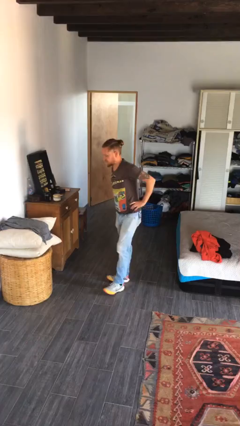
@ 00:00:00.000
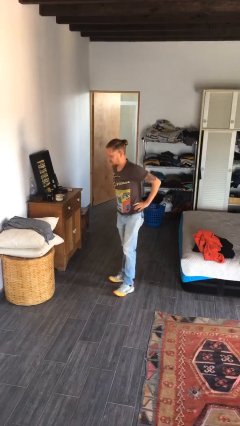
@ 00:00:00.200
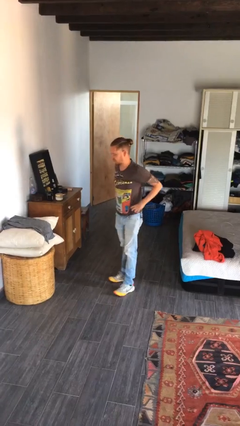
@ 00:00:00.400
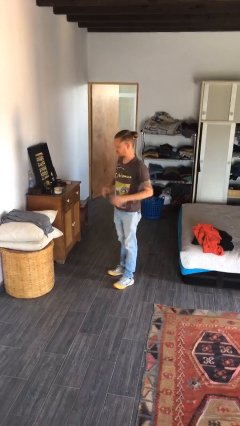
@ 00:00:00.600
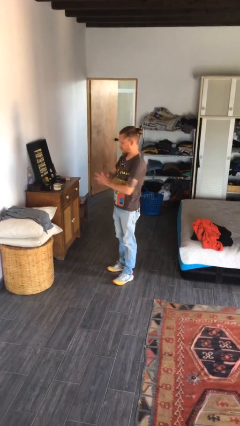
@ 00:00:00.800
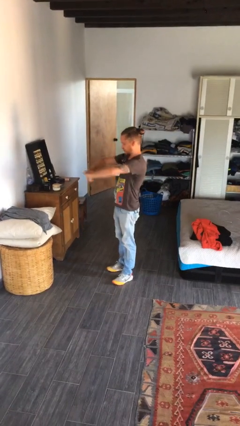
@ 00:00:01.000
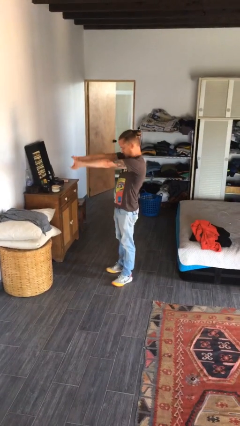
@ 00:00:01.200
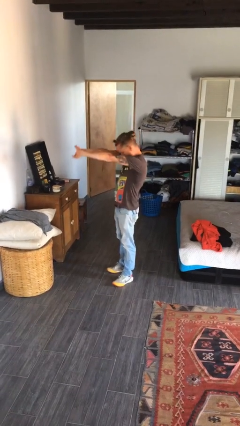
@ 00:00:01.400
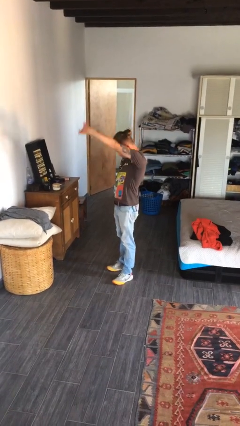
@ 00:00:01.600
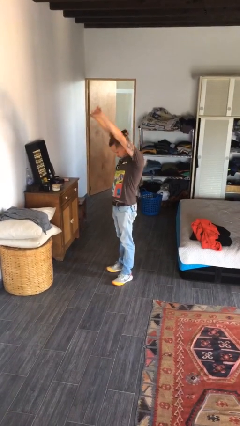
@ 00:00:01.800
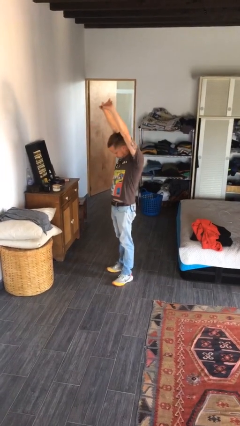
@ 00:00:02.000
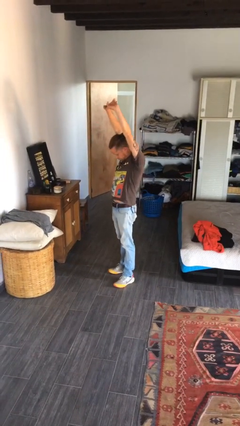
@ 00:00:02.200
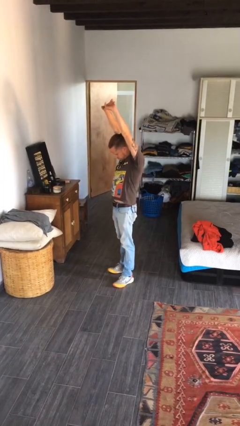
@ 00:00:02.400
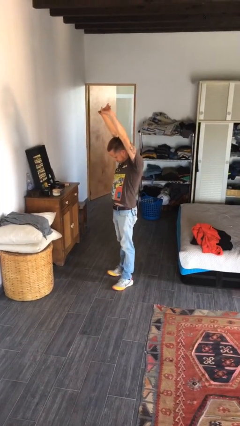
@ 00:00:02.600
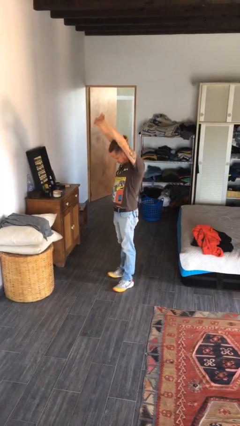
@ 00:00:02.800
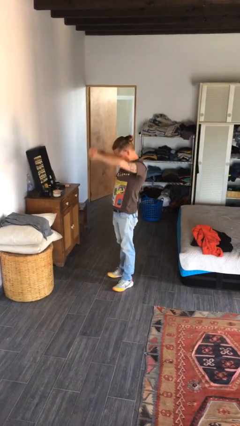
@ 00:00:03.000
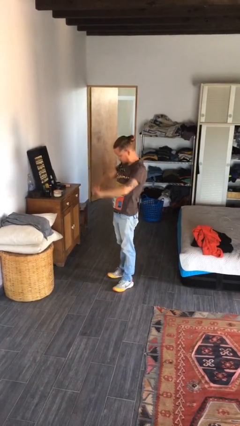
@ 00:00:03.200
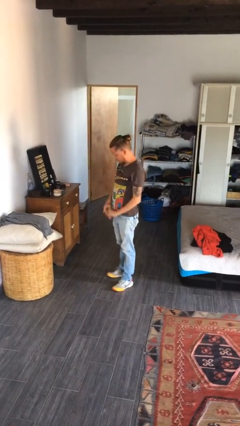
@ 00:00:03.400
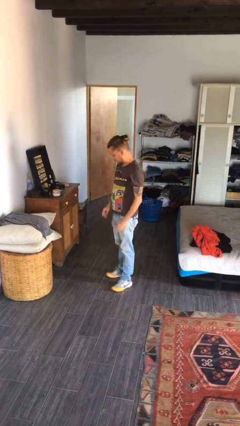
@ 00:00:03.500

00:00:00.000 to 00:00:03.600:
person stretches arms to side

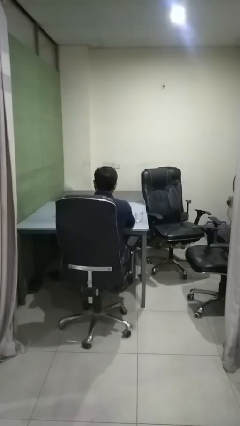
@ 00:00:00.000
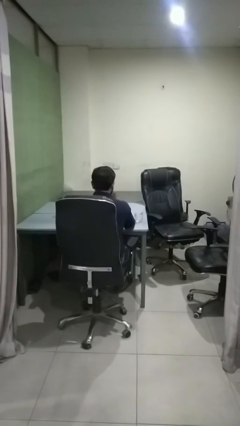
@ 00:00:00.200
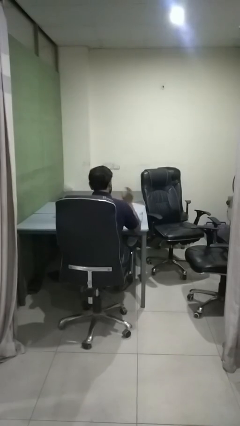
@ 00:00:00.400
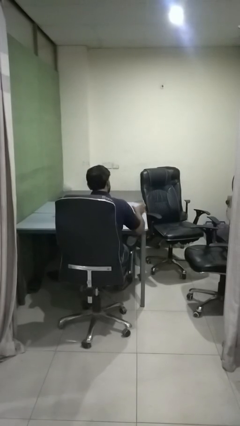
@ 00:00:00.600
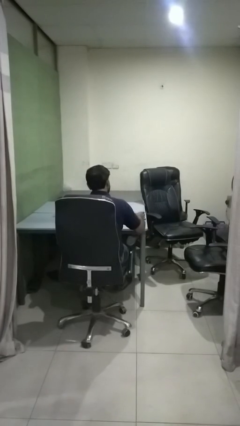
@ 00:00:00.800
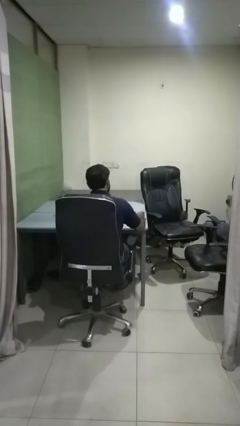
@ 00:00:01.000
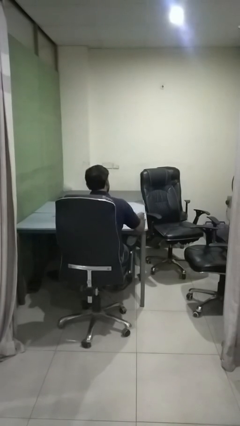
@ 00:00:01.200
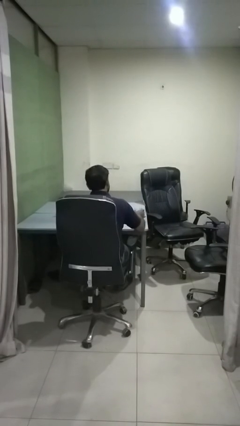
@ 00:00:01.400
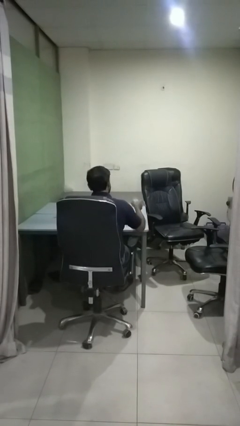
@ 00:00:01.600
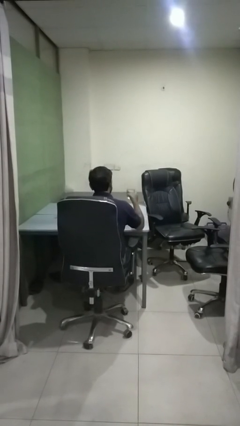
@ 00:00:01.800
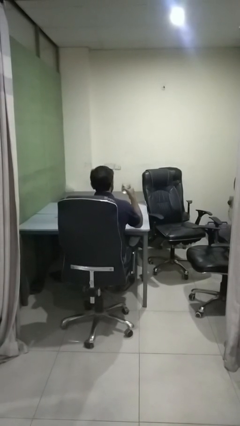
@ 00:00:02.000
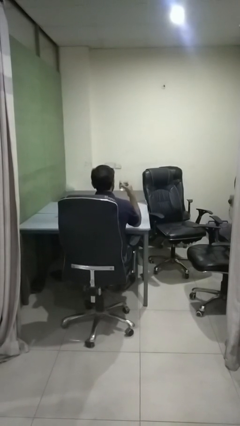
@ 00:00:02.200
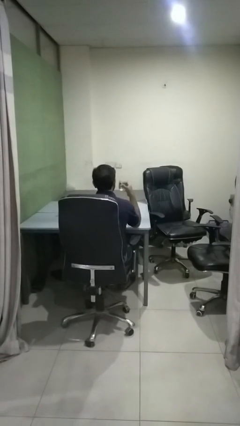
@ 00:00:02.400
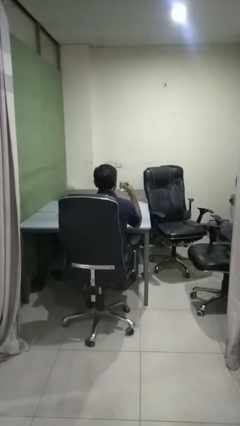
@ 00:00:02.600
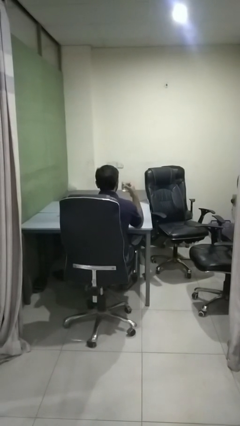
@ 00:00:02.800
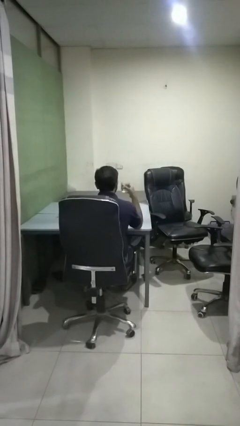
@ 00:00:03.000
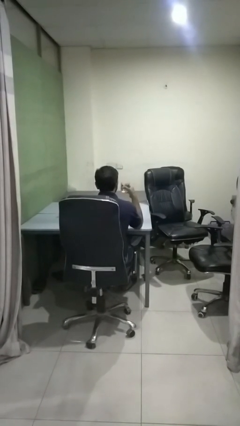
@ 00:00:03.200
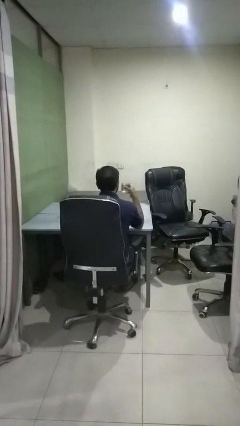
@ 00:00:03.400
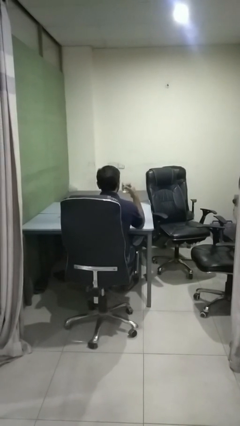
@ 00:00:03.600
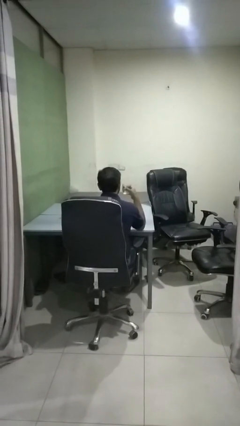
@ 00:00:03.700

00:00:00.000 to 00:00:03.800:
person picks up object from table

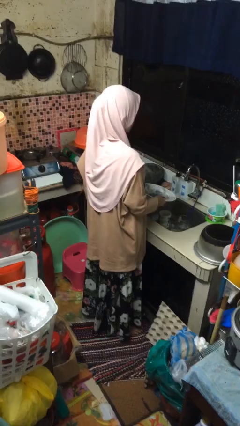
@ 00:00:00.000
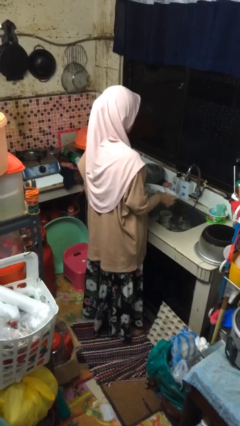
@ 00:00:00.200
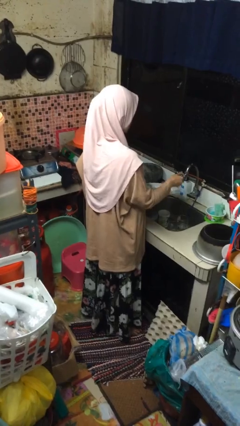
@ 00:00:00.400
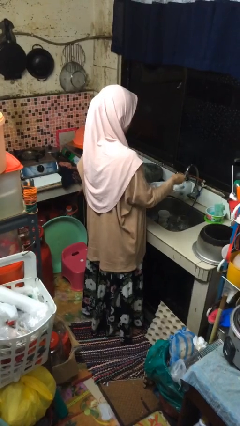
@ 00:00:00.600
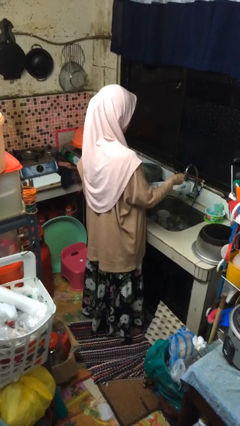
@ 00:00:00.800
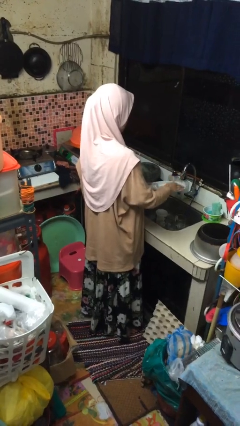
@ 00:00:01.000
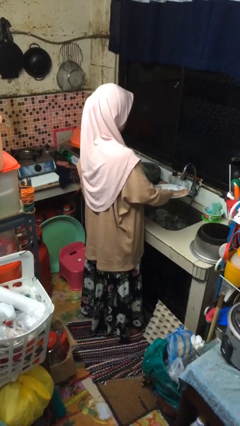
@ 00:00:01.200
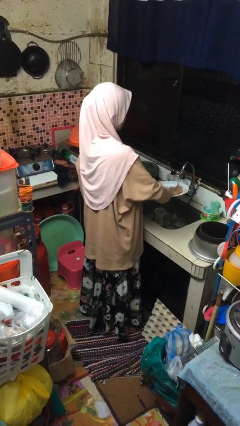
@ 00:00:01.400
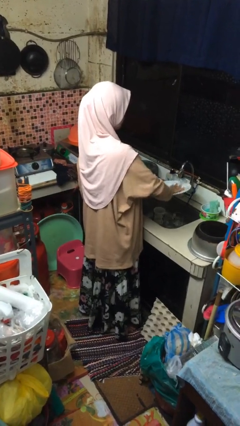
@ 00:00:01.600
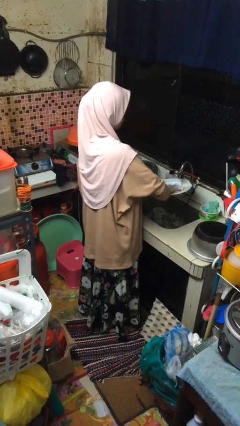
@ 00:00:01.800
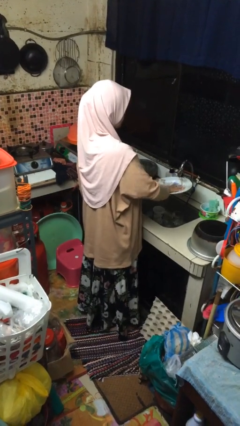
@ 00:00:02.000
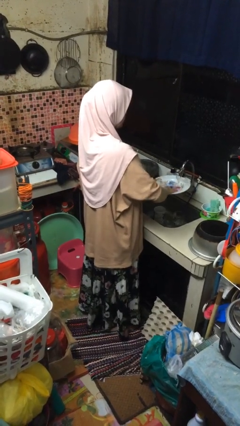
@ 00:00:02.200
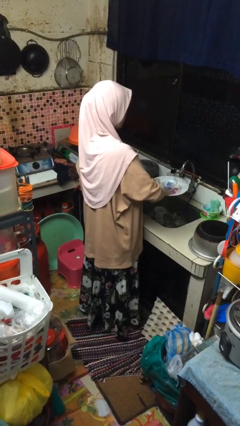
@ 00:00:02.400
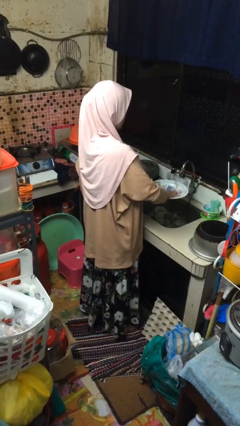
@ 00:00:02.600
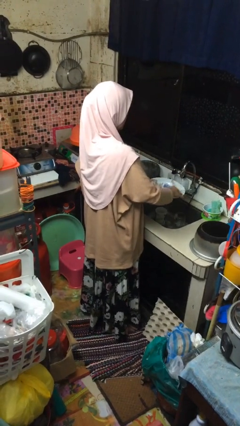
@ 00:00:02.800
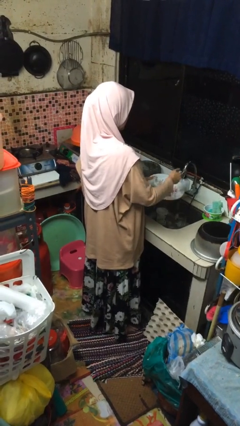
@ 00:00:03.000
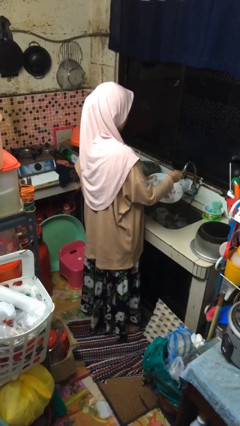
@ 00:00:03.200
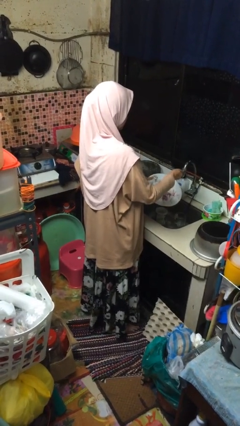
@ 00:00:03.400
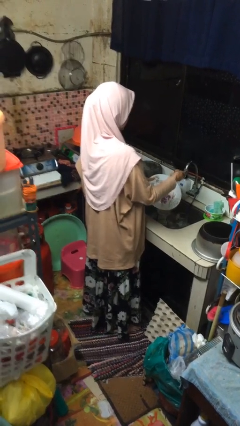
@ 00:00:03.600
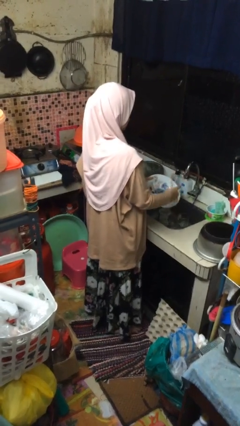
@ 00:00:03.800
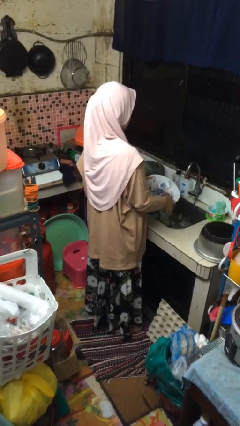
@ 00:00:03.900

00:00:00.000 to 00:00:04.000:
person washes dish

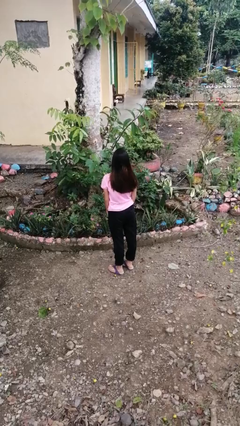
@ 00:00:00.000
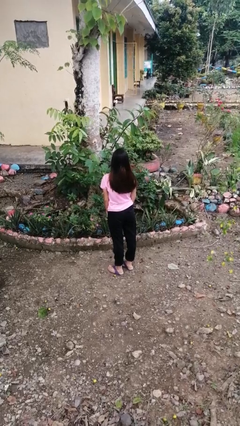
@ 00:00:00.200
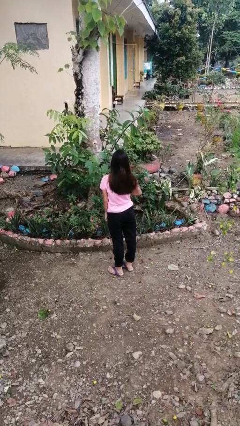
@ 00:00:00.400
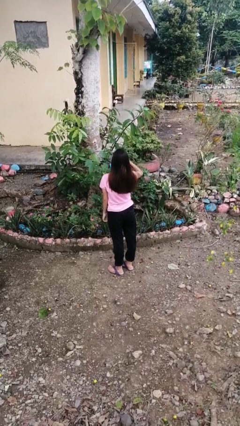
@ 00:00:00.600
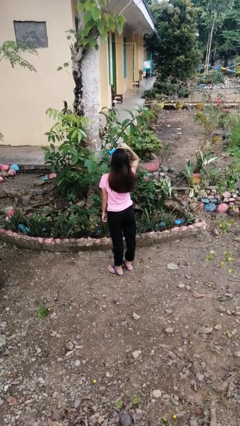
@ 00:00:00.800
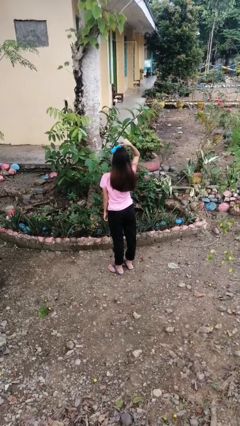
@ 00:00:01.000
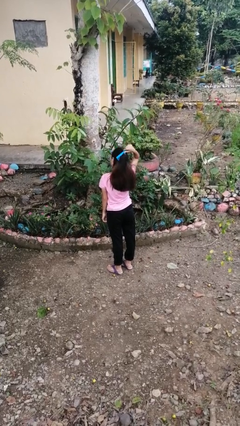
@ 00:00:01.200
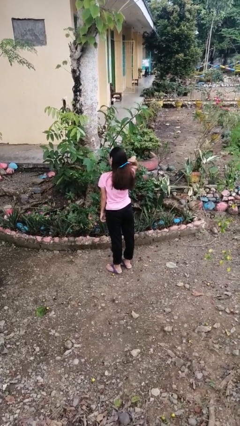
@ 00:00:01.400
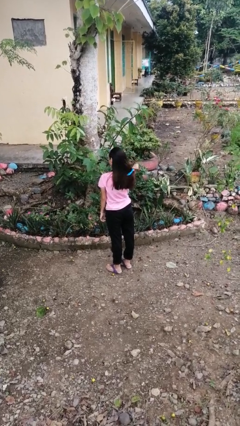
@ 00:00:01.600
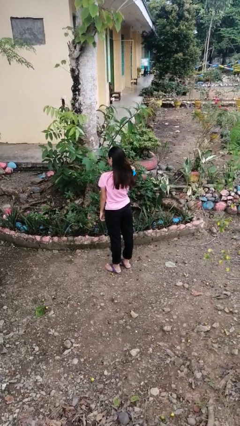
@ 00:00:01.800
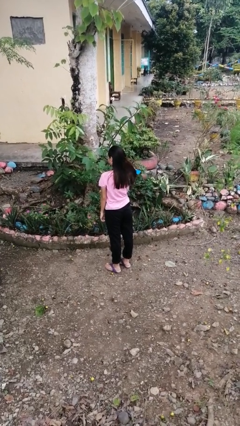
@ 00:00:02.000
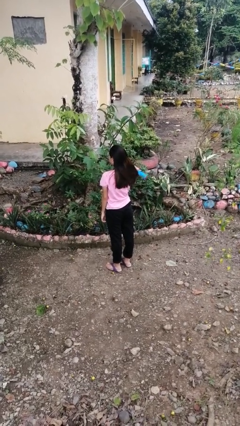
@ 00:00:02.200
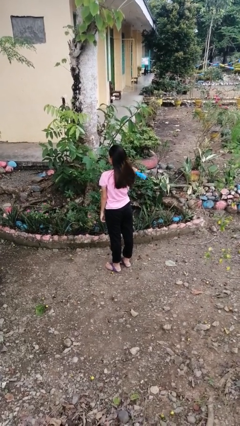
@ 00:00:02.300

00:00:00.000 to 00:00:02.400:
person brushes hair

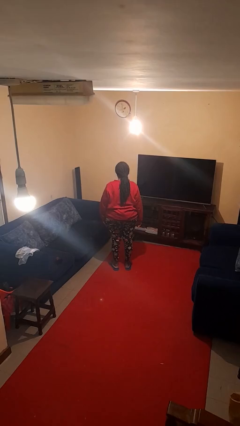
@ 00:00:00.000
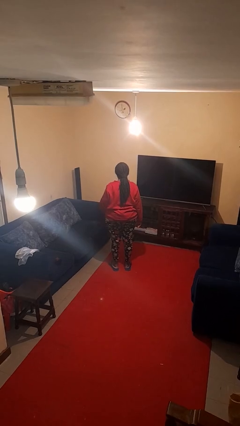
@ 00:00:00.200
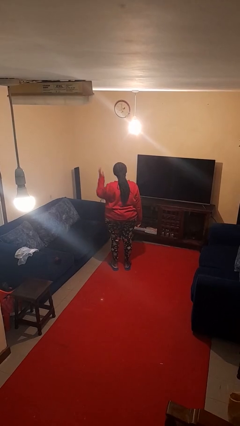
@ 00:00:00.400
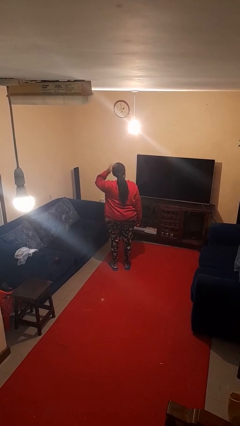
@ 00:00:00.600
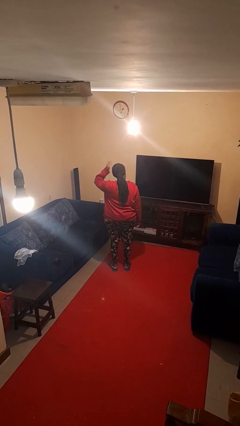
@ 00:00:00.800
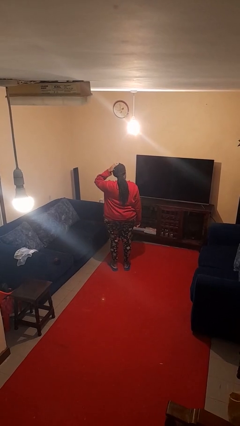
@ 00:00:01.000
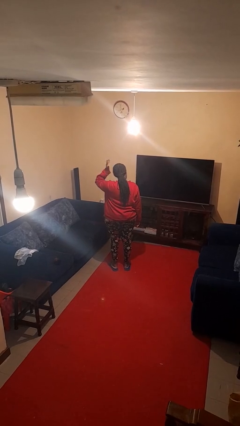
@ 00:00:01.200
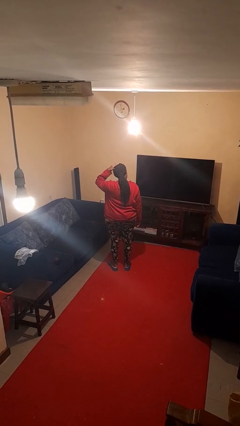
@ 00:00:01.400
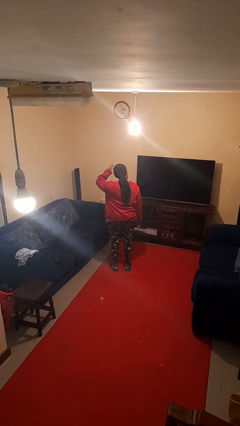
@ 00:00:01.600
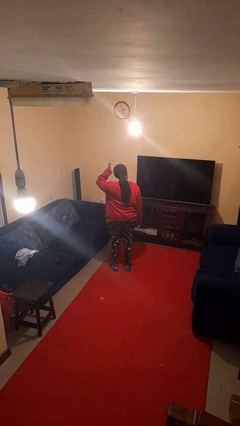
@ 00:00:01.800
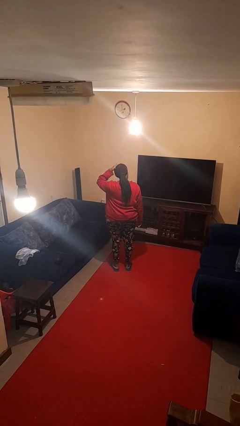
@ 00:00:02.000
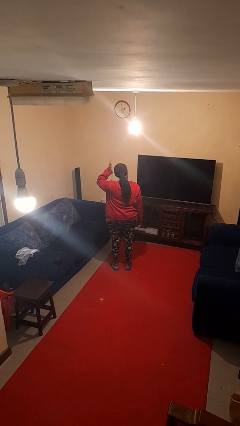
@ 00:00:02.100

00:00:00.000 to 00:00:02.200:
person pats head

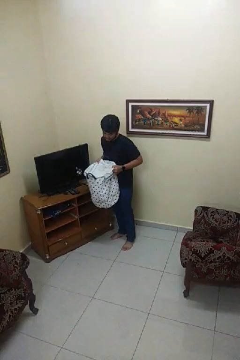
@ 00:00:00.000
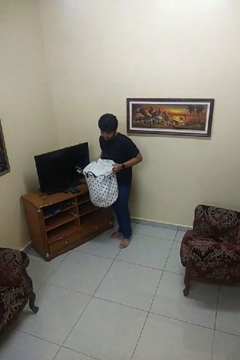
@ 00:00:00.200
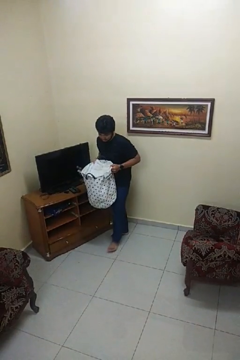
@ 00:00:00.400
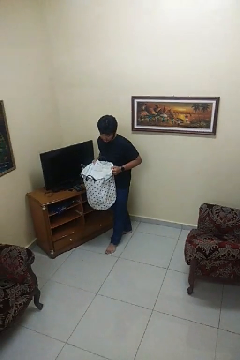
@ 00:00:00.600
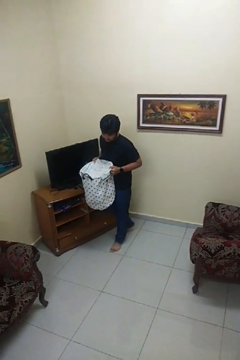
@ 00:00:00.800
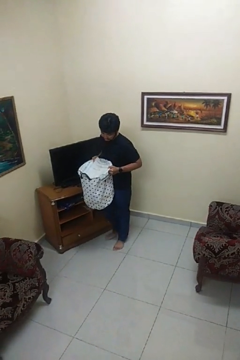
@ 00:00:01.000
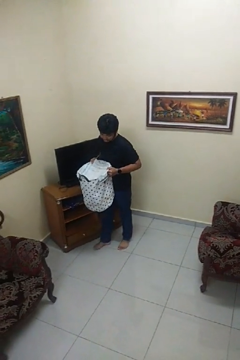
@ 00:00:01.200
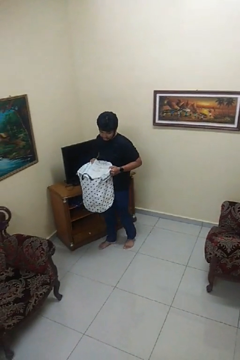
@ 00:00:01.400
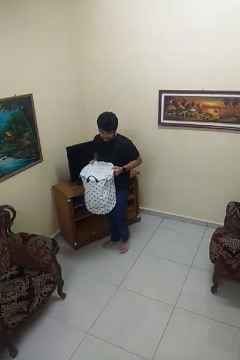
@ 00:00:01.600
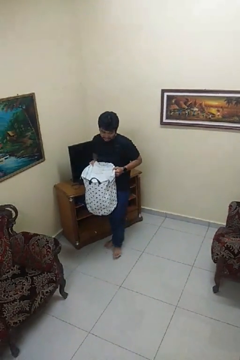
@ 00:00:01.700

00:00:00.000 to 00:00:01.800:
person carries laundry basket
